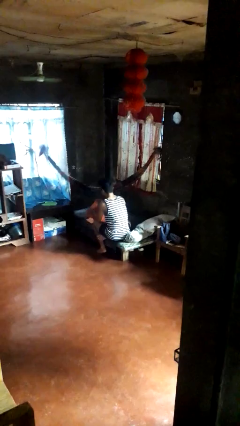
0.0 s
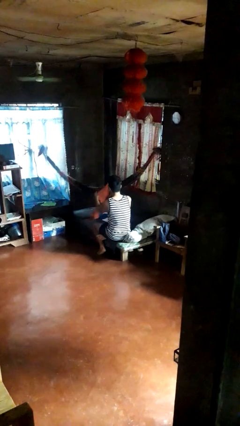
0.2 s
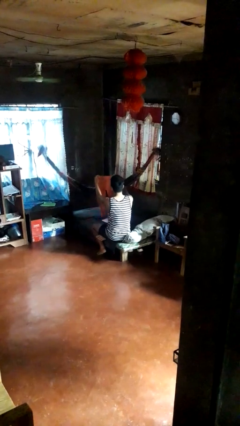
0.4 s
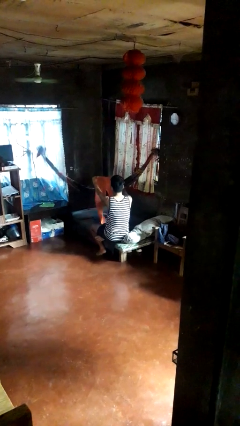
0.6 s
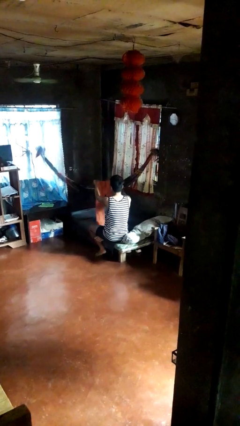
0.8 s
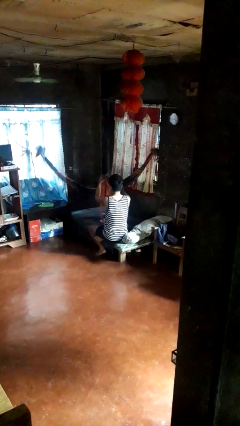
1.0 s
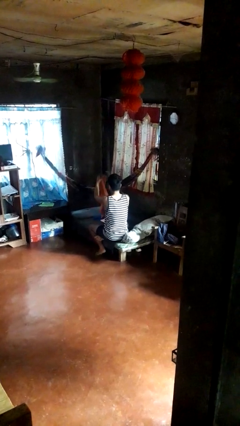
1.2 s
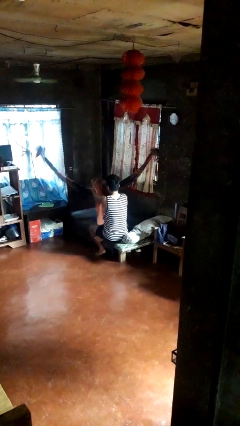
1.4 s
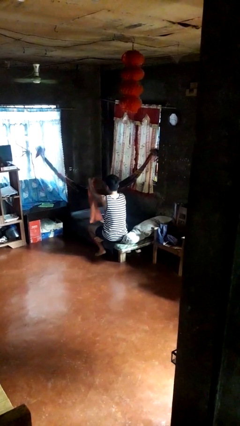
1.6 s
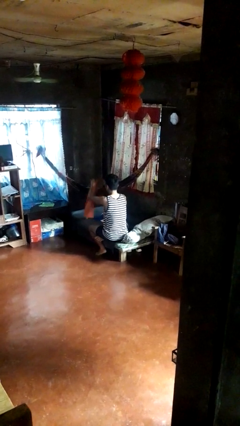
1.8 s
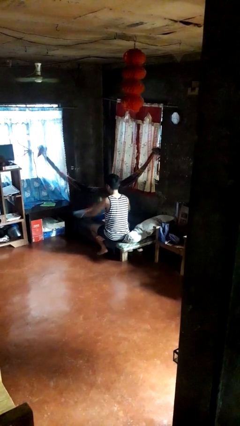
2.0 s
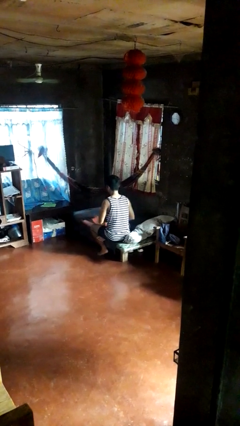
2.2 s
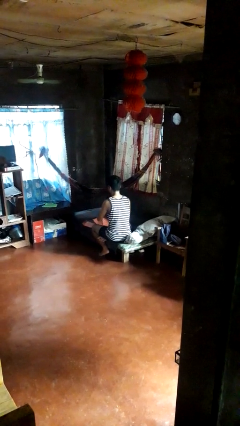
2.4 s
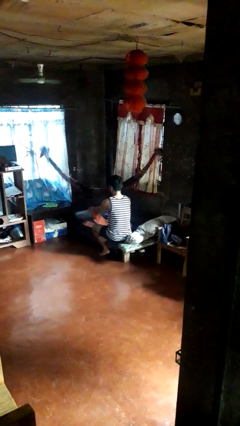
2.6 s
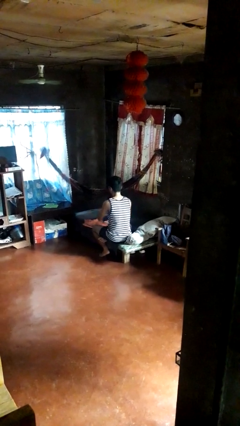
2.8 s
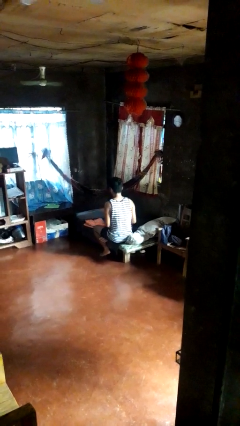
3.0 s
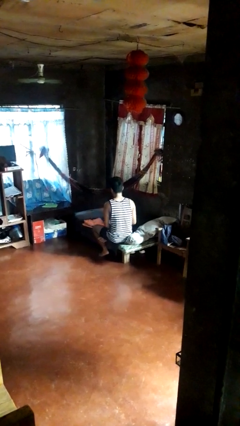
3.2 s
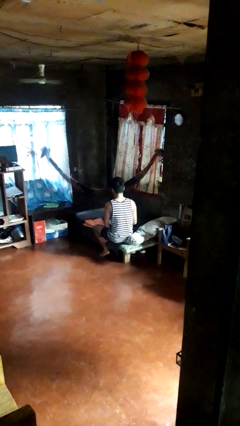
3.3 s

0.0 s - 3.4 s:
person folds pants

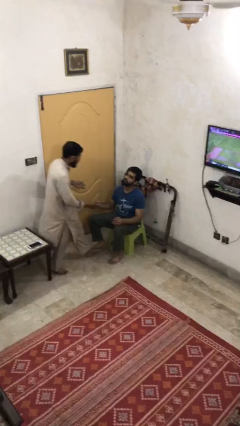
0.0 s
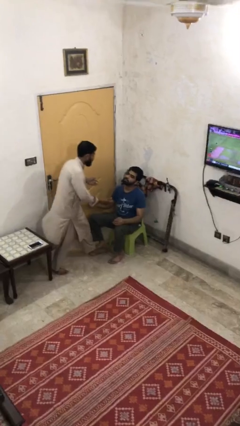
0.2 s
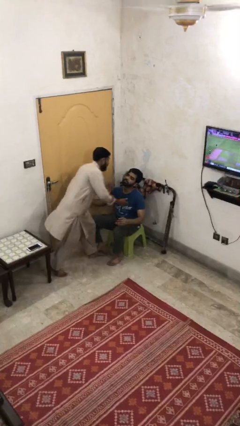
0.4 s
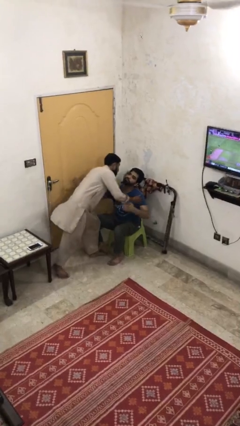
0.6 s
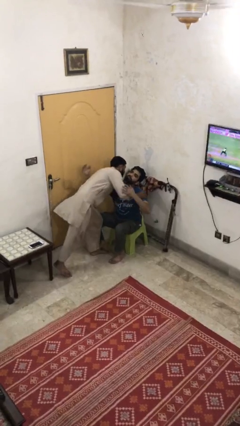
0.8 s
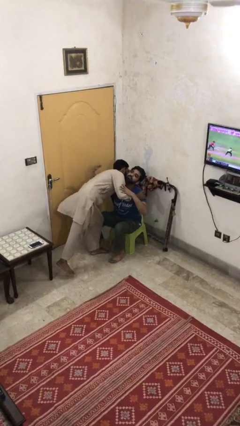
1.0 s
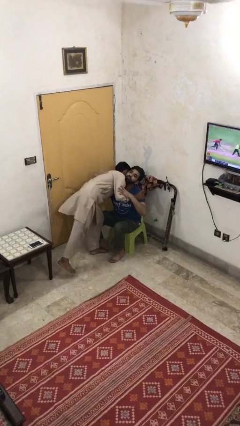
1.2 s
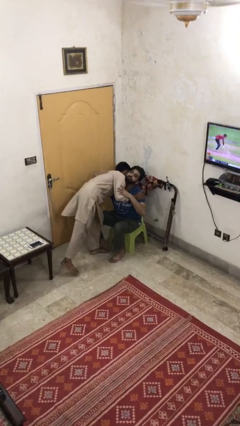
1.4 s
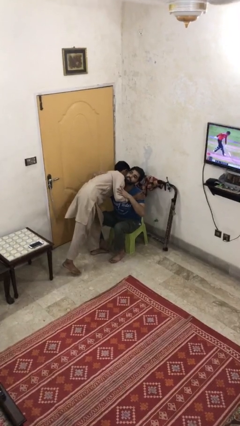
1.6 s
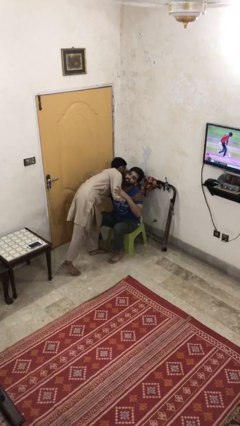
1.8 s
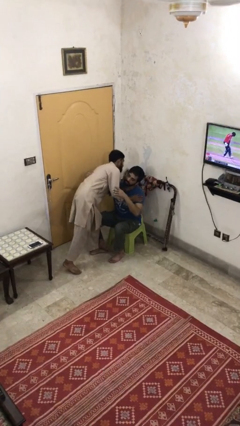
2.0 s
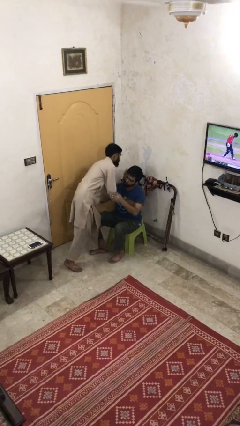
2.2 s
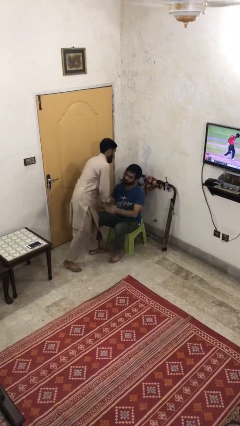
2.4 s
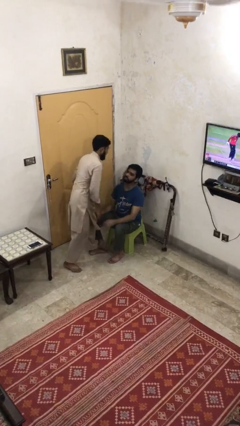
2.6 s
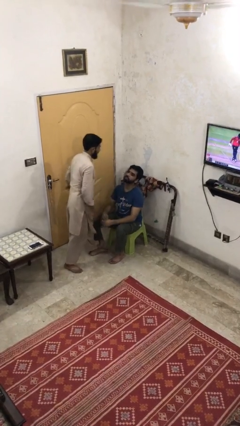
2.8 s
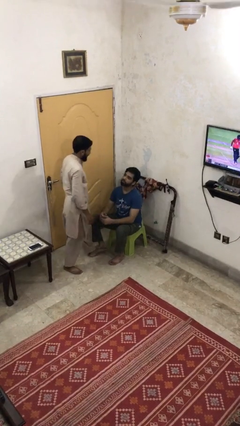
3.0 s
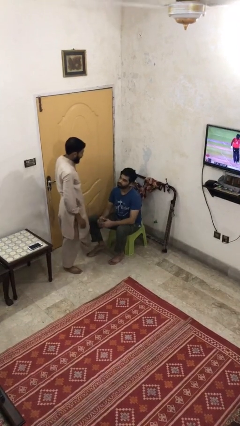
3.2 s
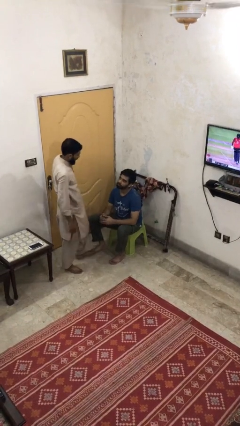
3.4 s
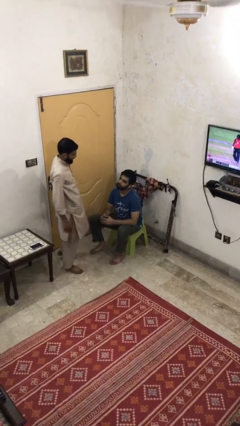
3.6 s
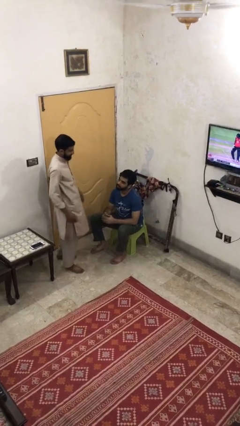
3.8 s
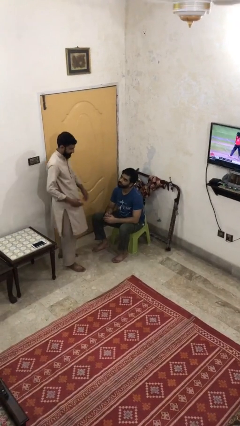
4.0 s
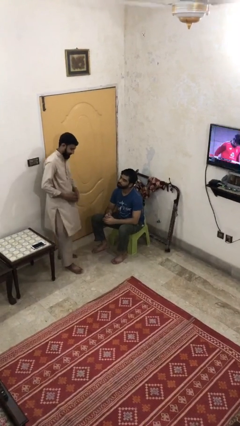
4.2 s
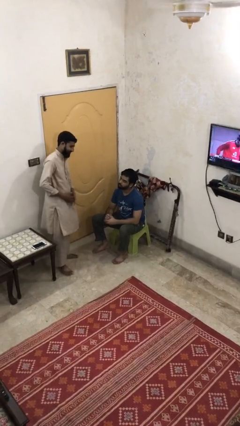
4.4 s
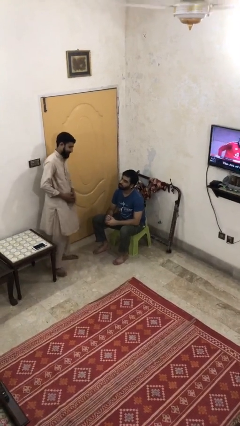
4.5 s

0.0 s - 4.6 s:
person embraces person

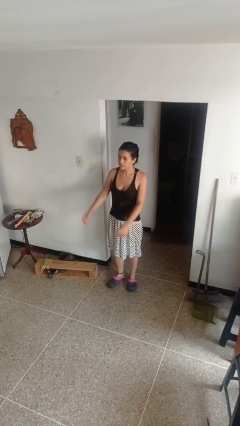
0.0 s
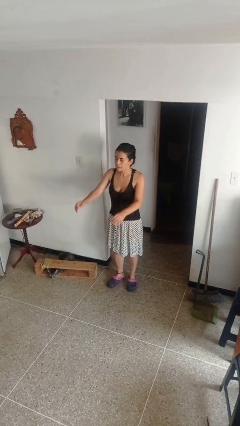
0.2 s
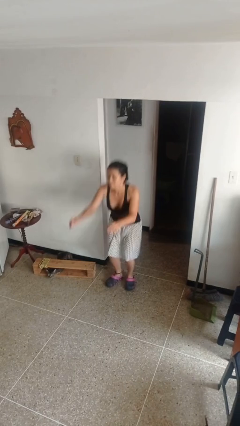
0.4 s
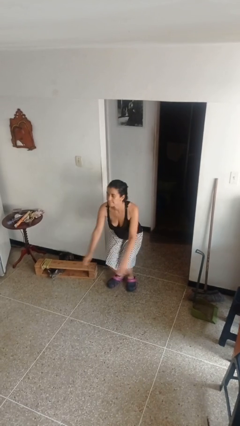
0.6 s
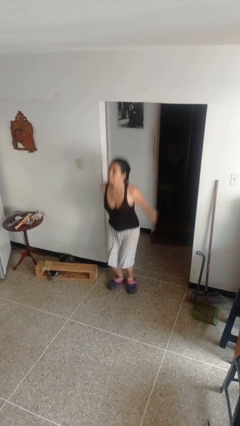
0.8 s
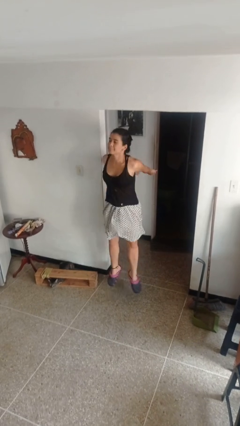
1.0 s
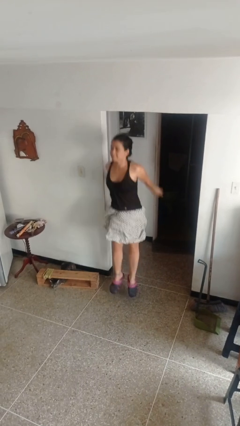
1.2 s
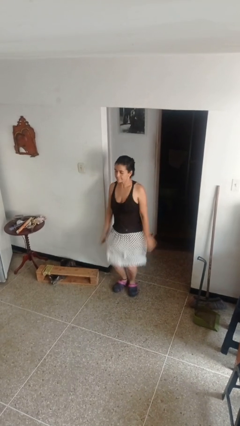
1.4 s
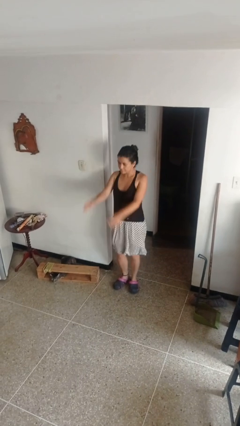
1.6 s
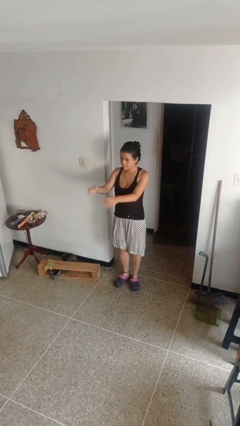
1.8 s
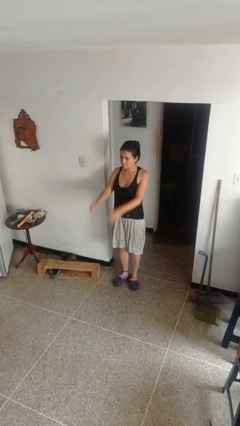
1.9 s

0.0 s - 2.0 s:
person jumps

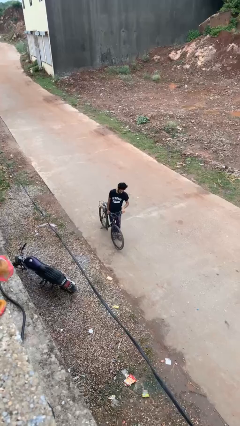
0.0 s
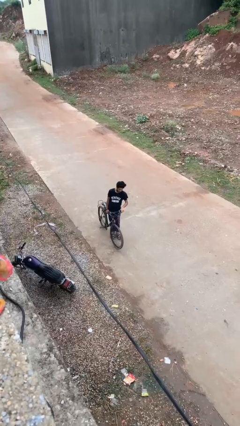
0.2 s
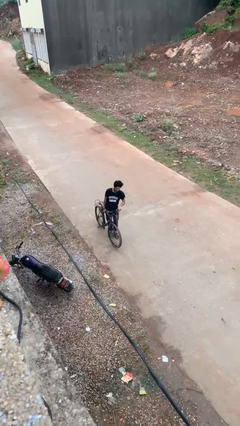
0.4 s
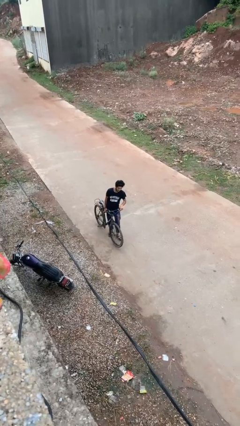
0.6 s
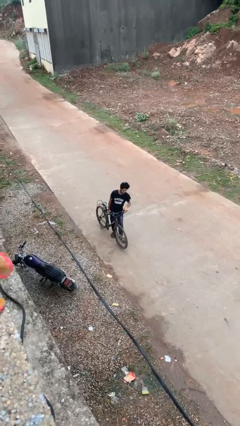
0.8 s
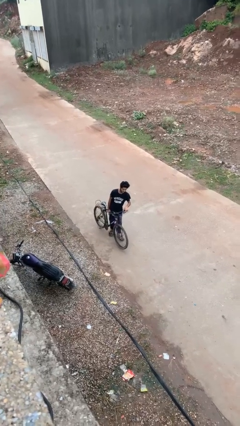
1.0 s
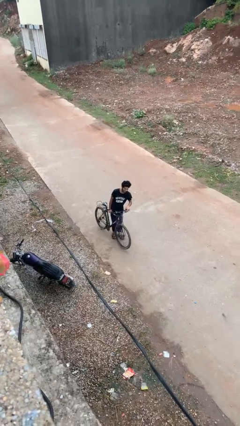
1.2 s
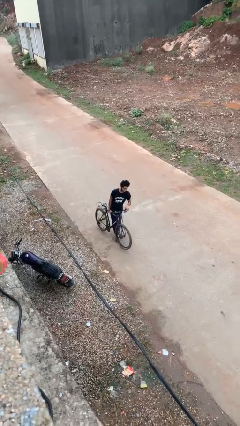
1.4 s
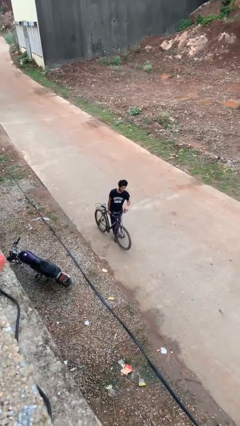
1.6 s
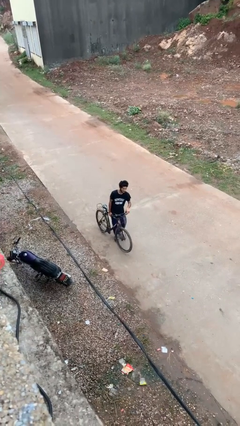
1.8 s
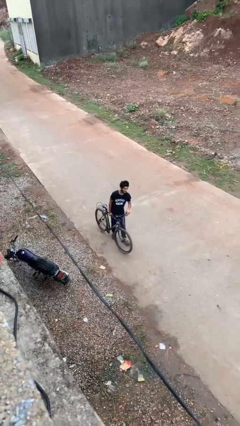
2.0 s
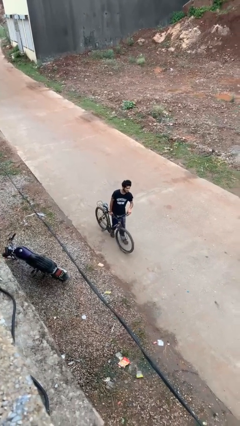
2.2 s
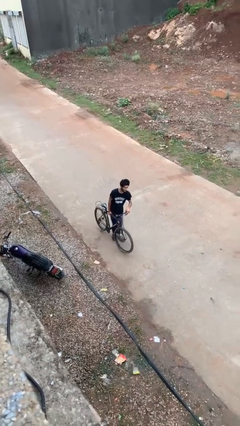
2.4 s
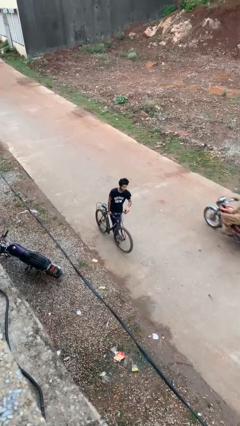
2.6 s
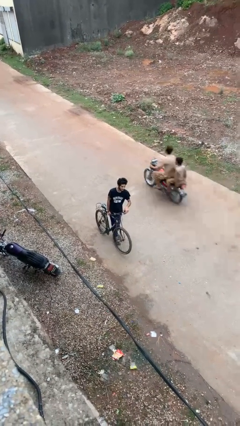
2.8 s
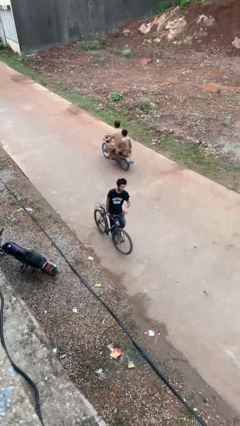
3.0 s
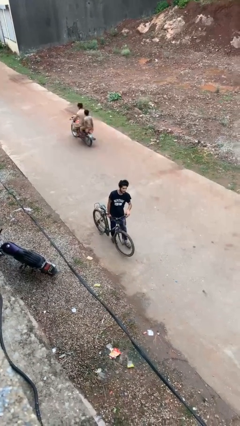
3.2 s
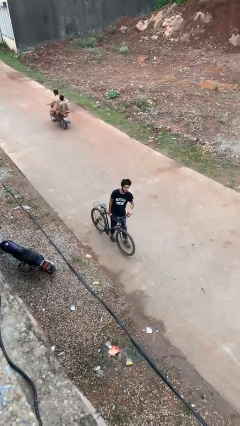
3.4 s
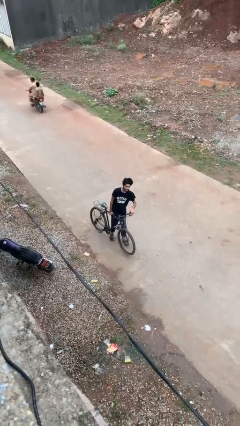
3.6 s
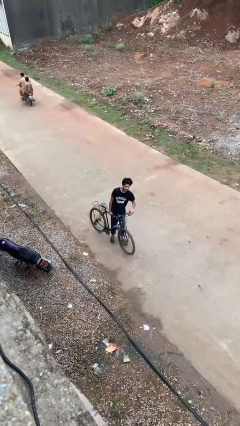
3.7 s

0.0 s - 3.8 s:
person carries bicycle

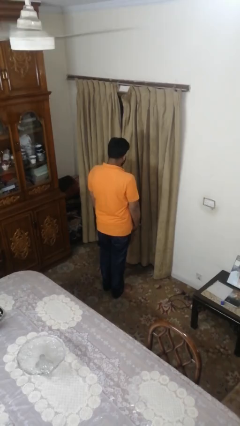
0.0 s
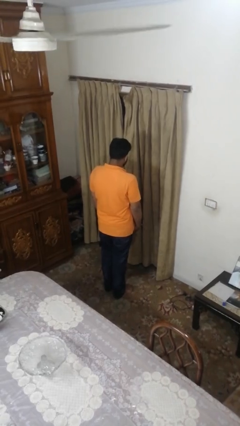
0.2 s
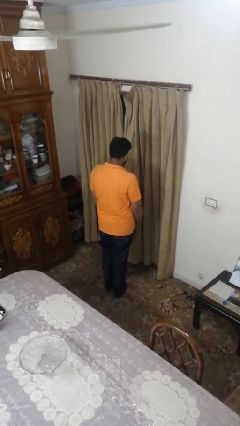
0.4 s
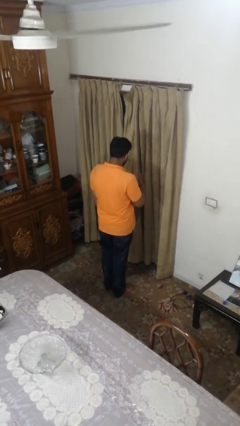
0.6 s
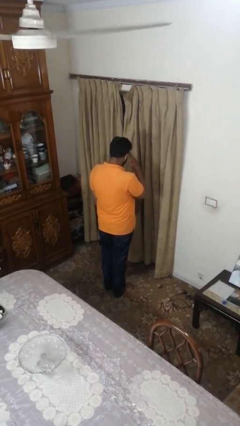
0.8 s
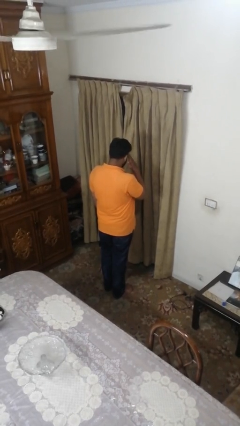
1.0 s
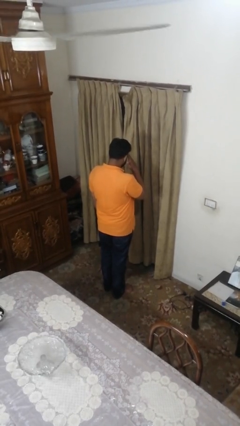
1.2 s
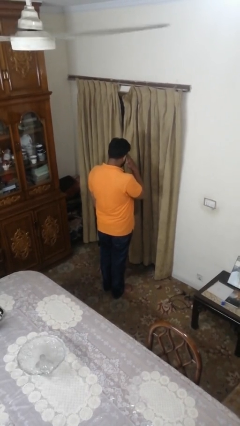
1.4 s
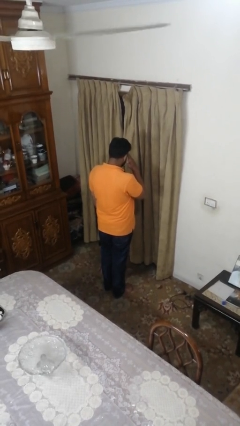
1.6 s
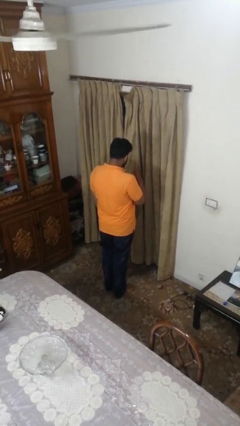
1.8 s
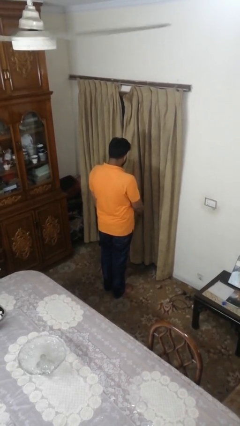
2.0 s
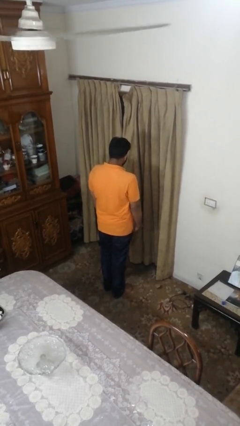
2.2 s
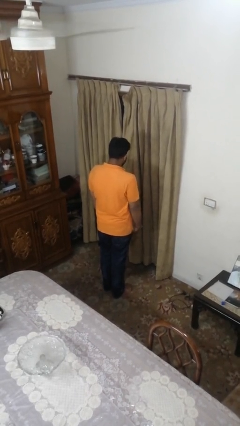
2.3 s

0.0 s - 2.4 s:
person salutes

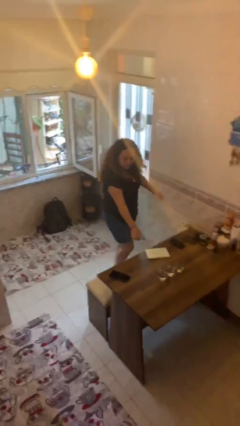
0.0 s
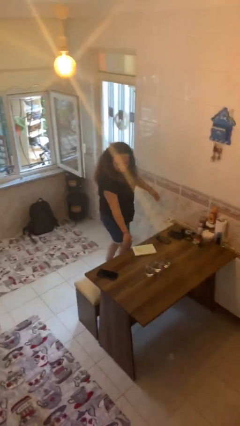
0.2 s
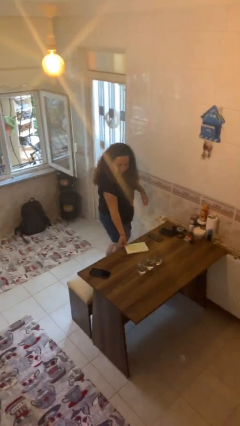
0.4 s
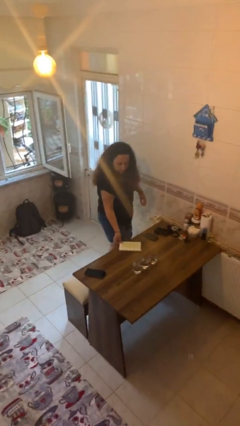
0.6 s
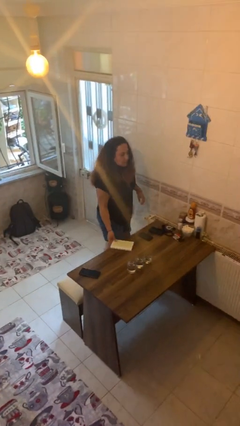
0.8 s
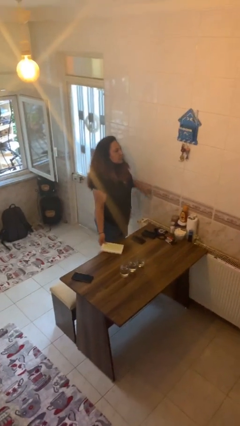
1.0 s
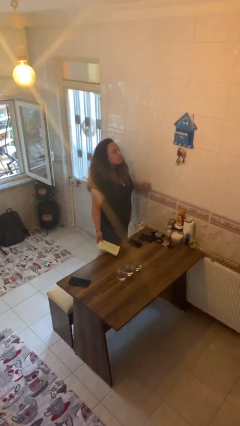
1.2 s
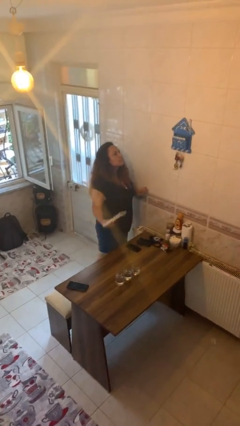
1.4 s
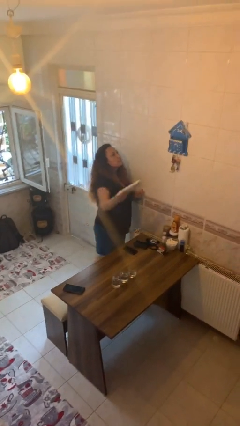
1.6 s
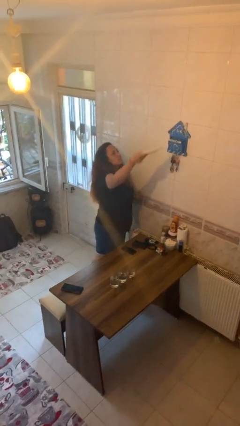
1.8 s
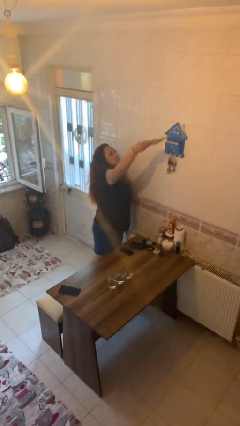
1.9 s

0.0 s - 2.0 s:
person picks up object from table
